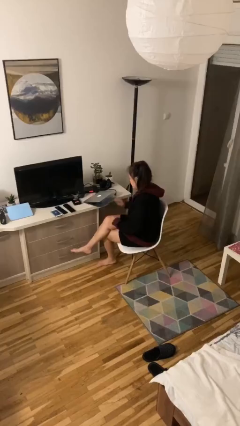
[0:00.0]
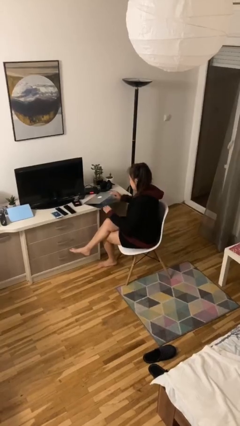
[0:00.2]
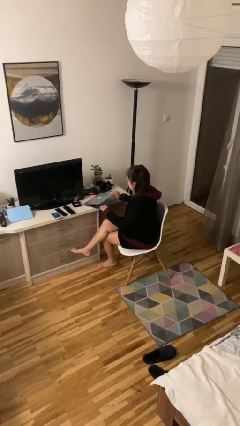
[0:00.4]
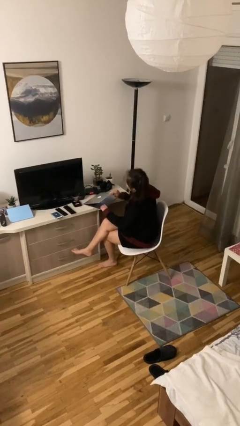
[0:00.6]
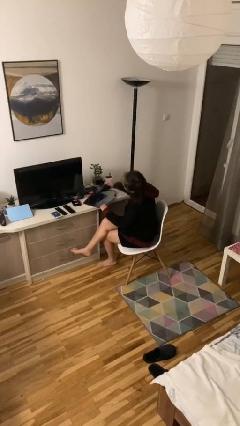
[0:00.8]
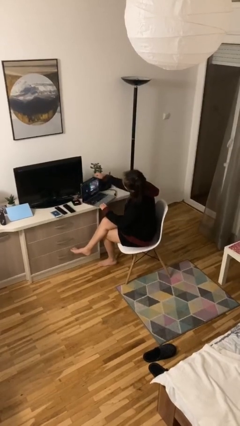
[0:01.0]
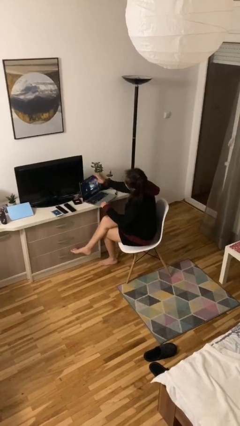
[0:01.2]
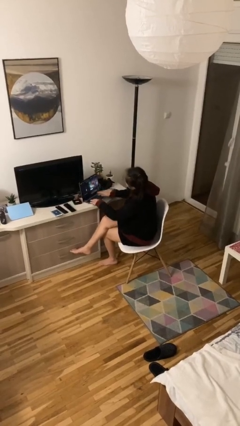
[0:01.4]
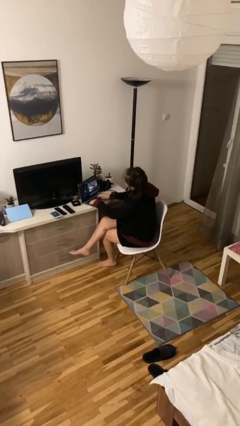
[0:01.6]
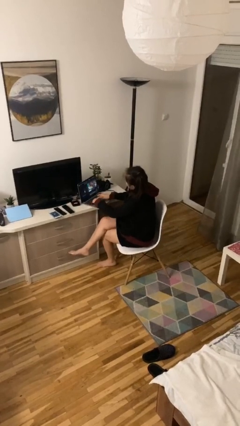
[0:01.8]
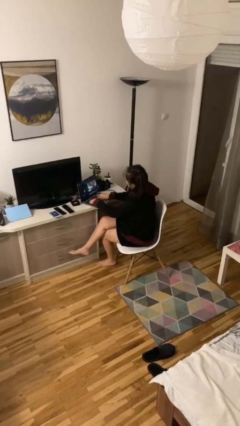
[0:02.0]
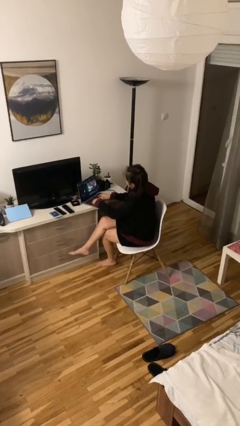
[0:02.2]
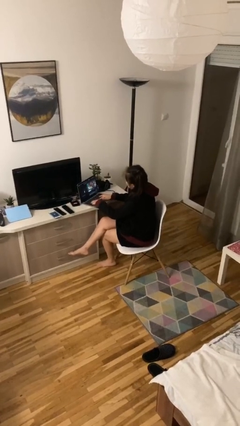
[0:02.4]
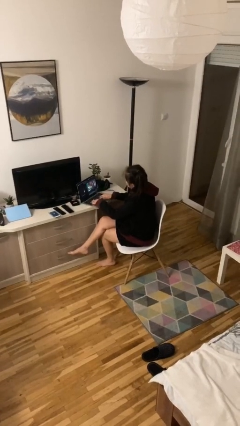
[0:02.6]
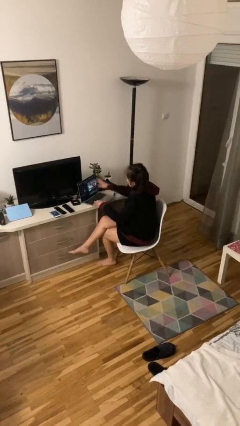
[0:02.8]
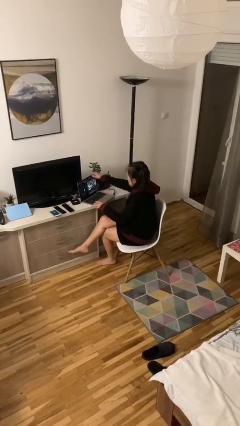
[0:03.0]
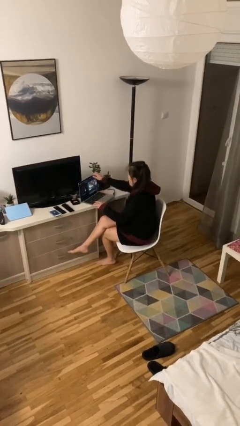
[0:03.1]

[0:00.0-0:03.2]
person interacts with laptop

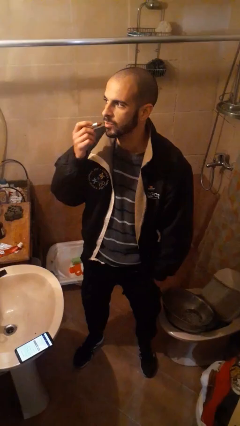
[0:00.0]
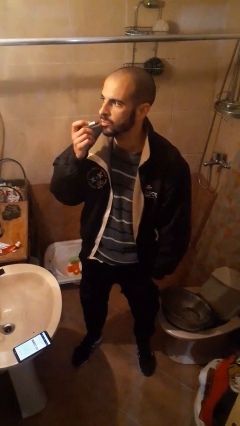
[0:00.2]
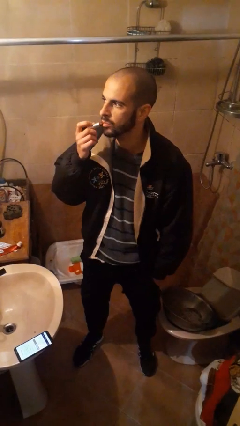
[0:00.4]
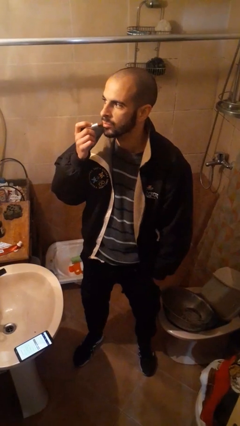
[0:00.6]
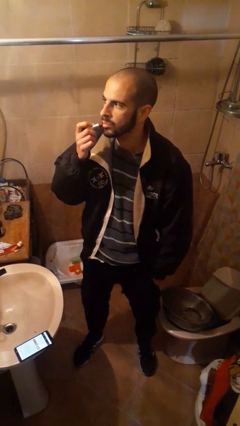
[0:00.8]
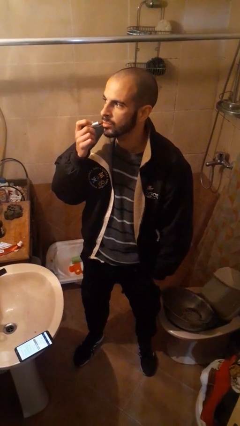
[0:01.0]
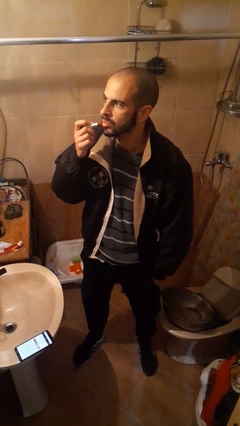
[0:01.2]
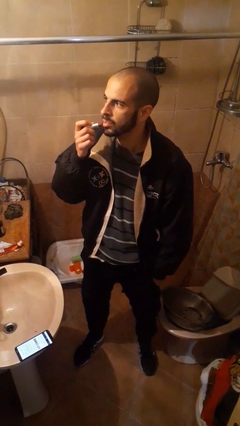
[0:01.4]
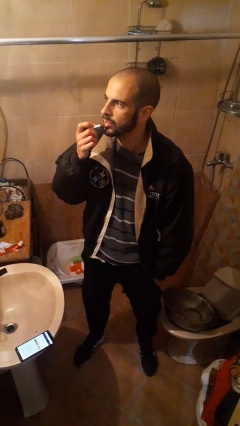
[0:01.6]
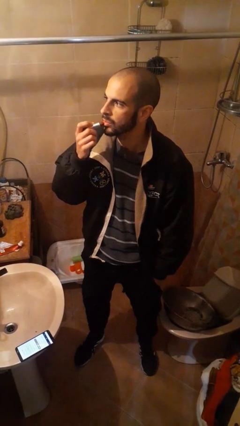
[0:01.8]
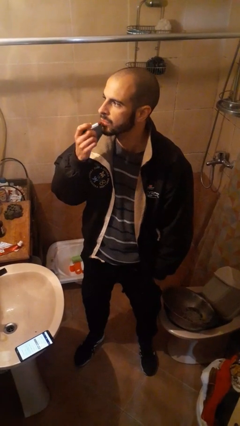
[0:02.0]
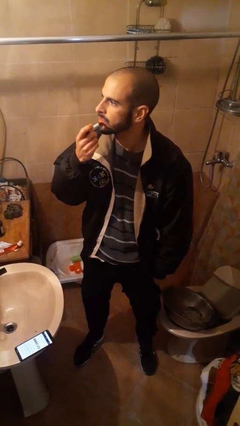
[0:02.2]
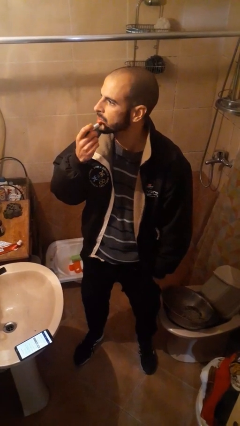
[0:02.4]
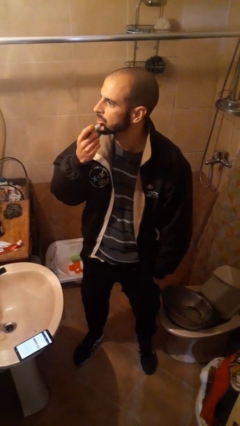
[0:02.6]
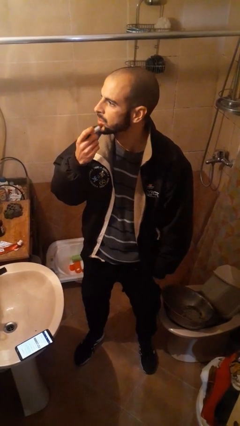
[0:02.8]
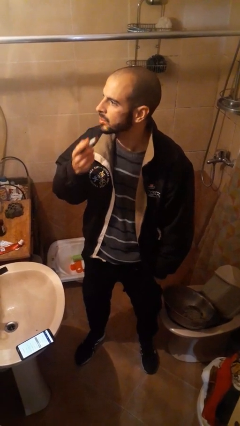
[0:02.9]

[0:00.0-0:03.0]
person applies lip makeup

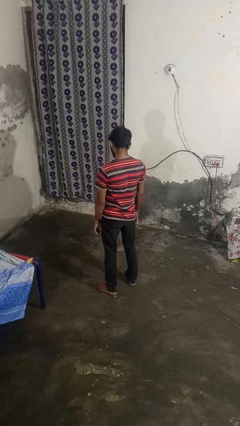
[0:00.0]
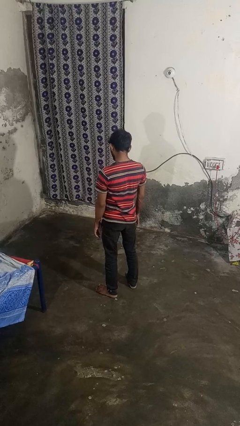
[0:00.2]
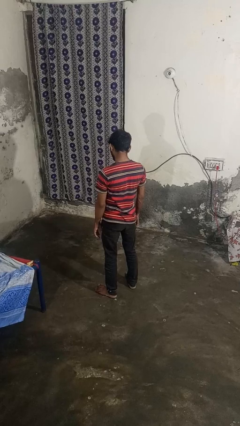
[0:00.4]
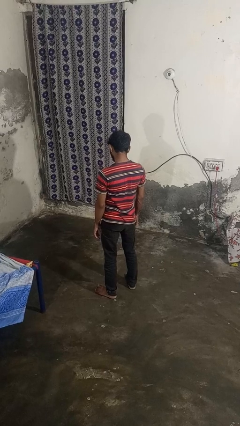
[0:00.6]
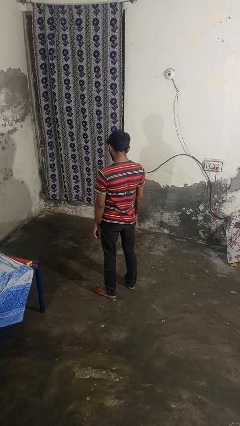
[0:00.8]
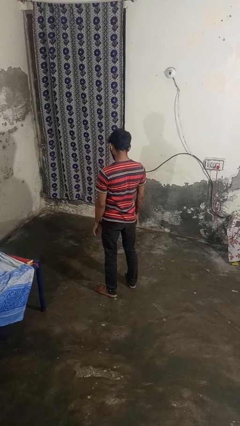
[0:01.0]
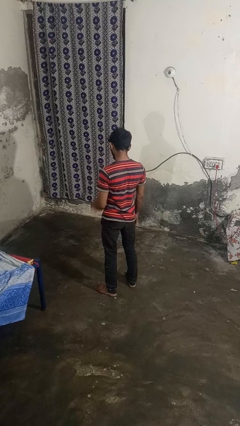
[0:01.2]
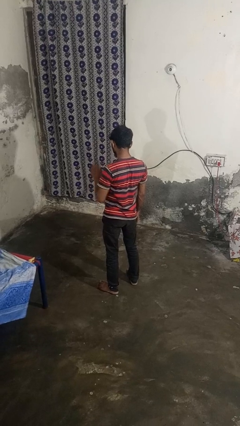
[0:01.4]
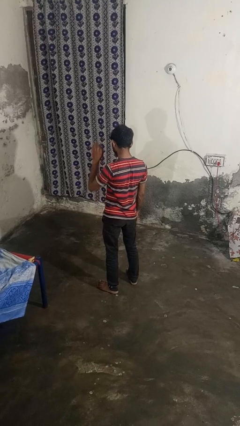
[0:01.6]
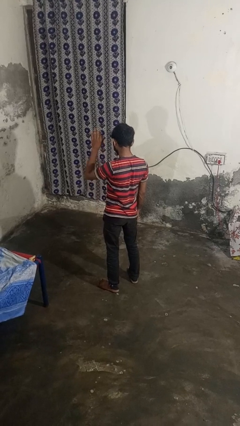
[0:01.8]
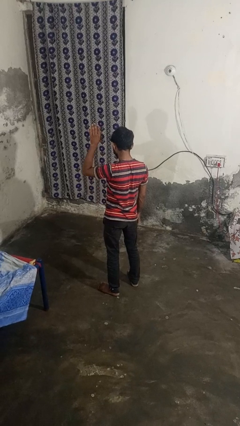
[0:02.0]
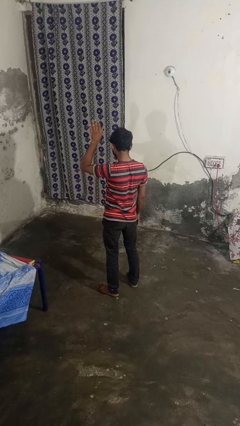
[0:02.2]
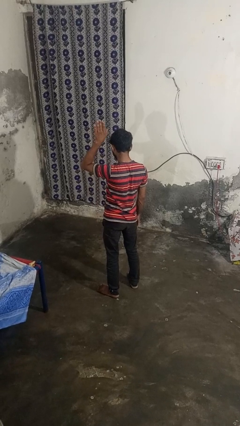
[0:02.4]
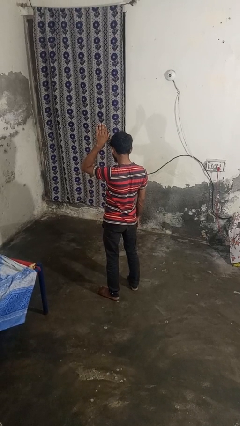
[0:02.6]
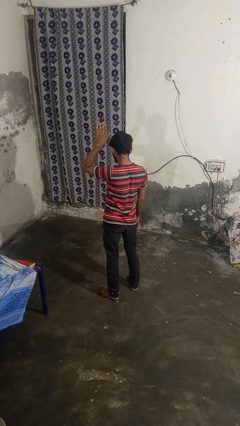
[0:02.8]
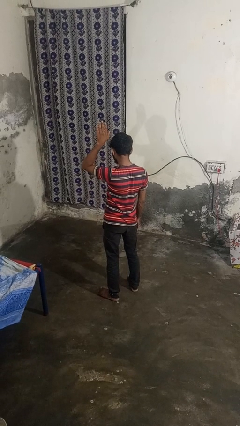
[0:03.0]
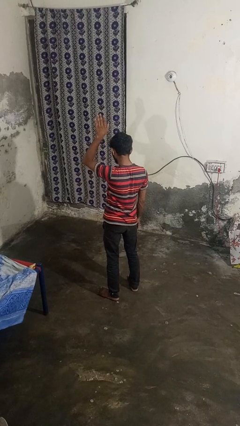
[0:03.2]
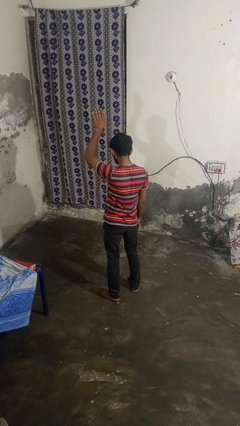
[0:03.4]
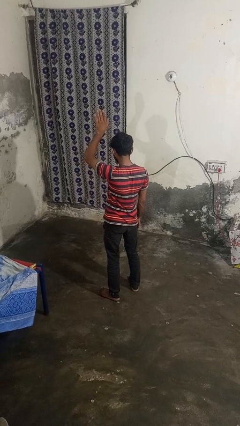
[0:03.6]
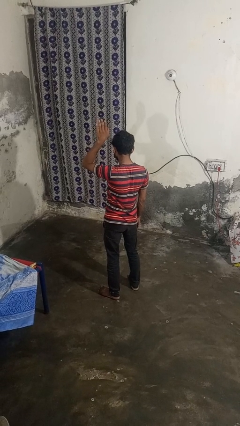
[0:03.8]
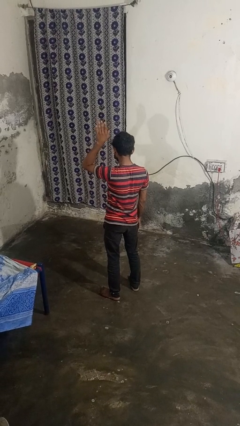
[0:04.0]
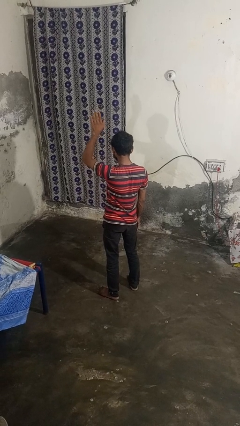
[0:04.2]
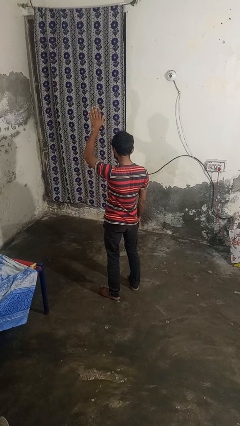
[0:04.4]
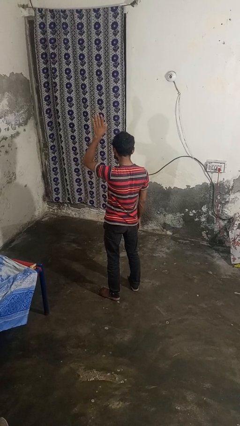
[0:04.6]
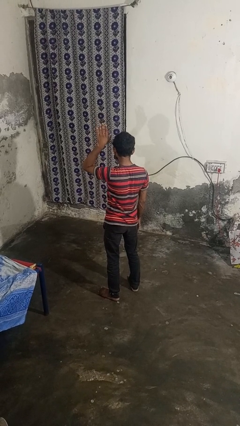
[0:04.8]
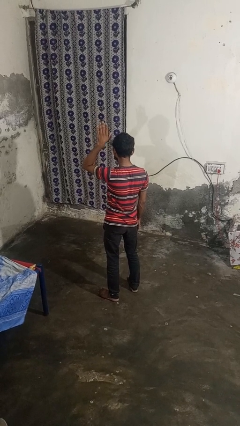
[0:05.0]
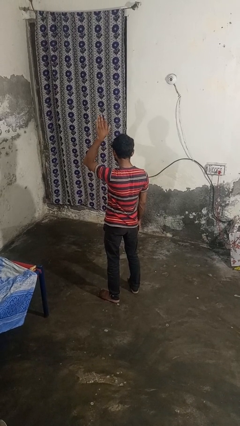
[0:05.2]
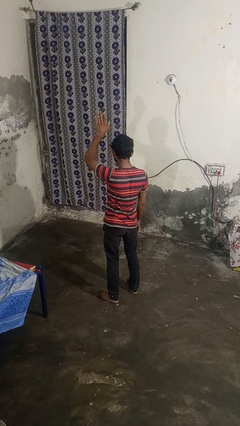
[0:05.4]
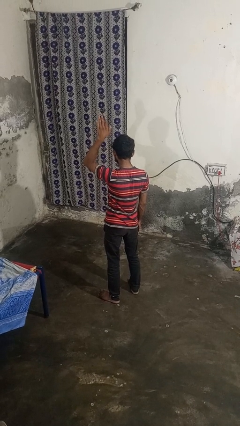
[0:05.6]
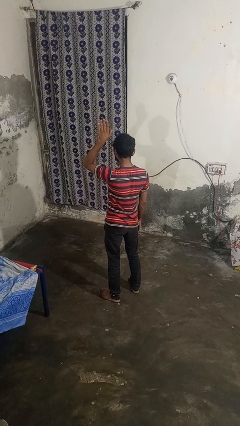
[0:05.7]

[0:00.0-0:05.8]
person gestures raise hand

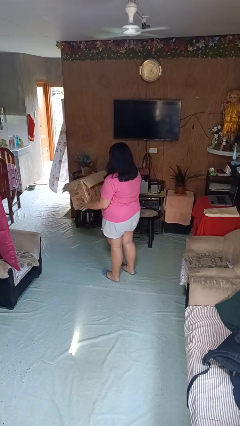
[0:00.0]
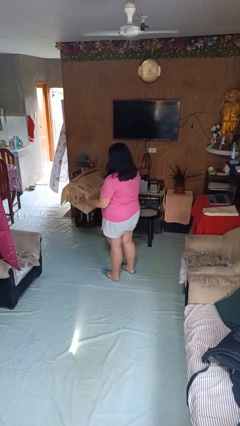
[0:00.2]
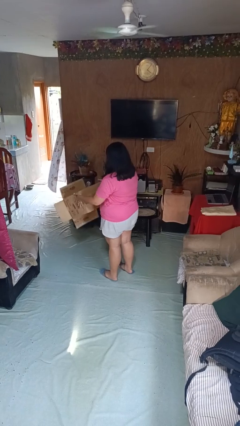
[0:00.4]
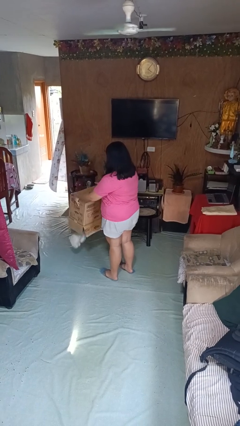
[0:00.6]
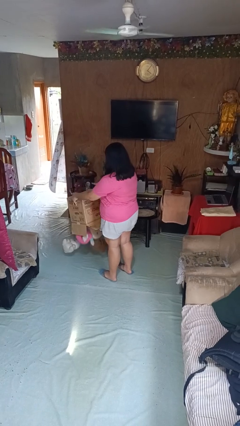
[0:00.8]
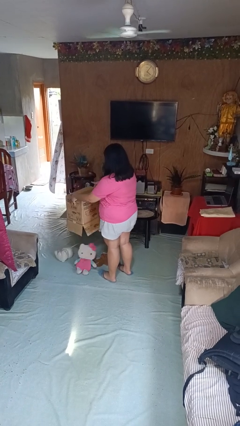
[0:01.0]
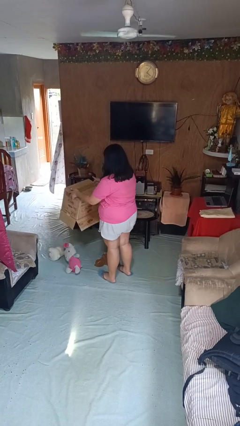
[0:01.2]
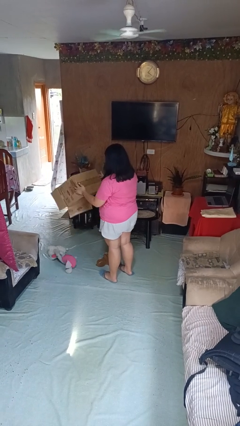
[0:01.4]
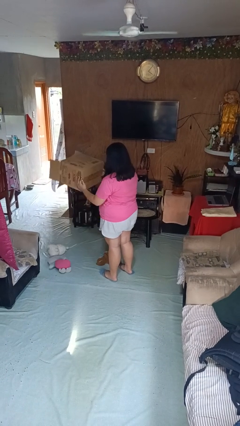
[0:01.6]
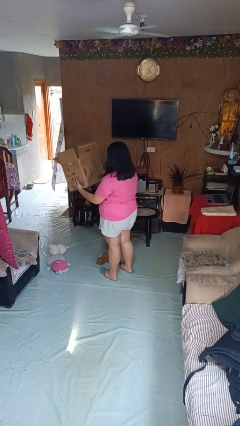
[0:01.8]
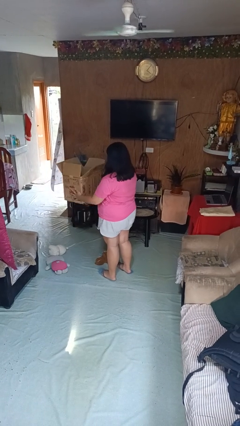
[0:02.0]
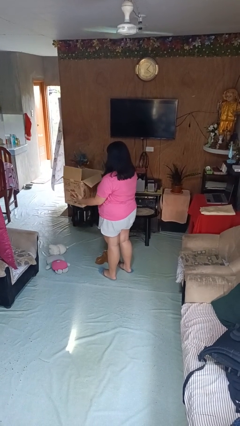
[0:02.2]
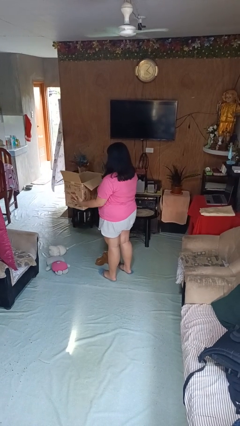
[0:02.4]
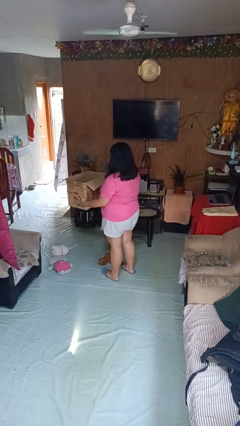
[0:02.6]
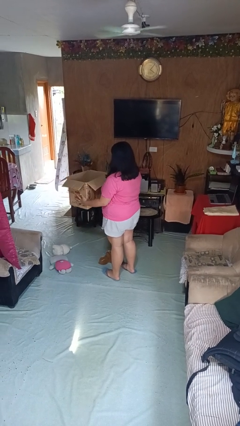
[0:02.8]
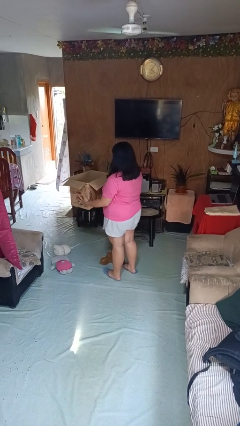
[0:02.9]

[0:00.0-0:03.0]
person unloads box onto floor

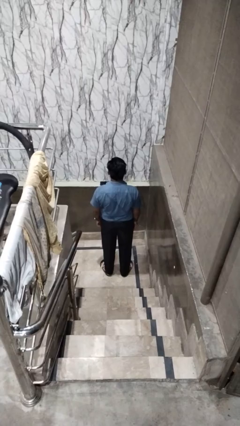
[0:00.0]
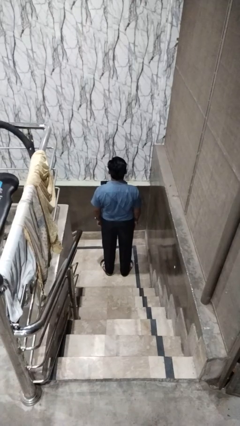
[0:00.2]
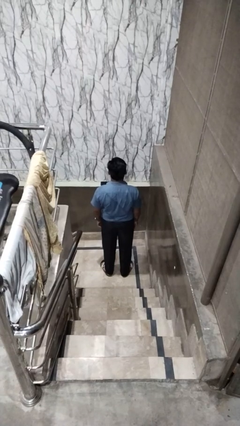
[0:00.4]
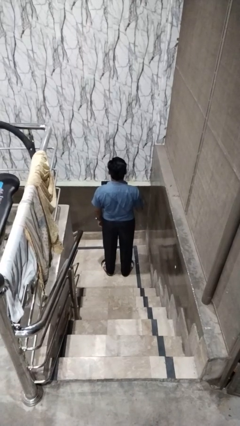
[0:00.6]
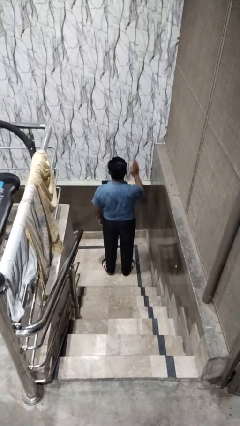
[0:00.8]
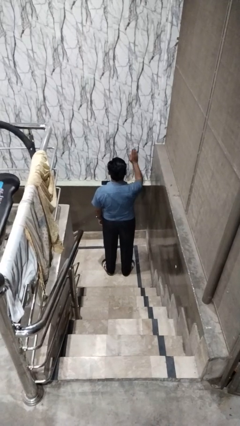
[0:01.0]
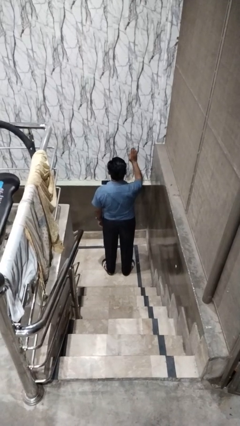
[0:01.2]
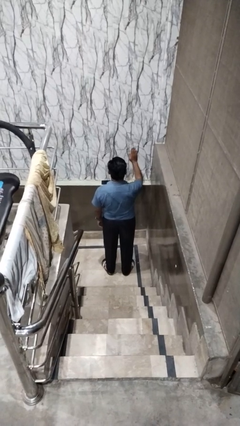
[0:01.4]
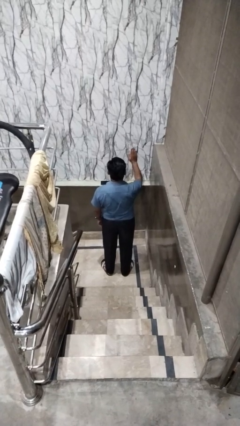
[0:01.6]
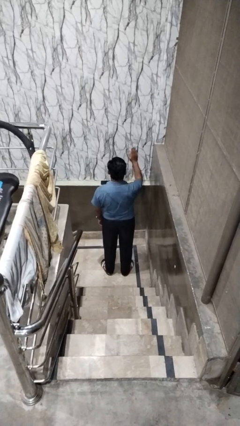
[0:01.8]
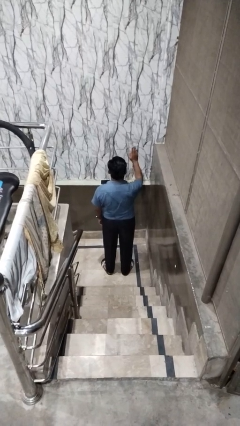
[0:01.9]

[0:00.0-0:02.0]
person gestures stop

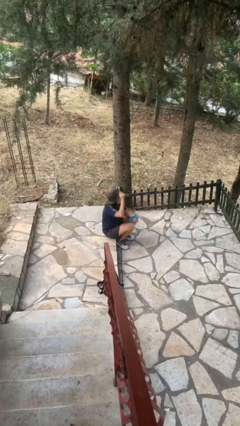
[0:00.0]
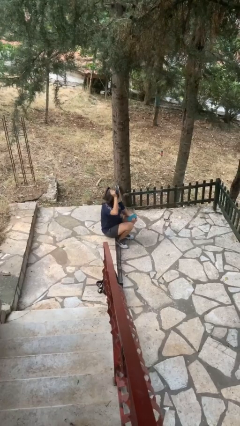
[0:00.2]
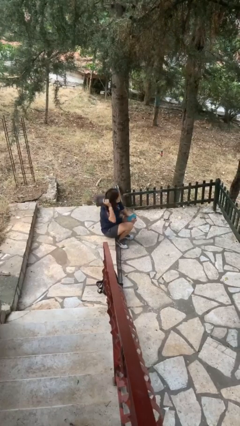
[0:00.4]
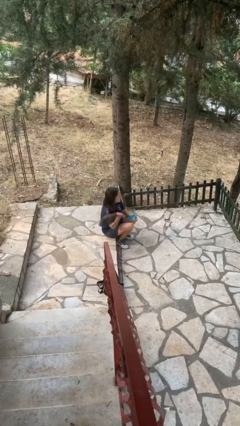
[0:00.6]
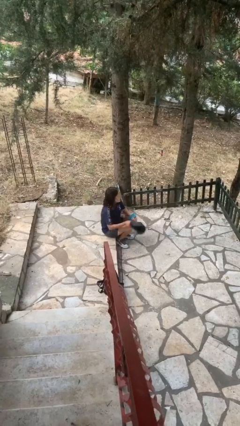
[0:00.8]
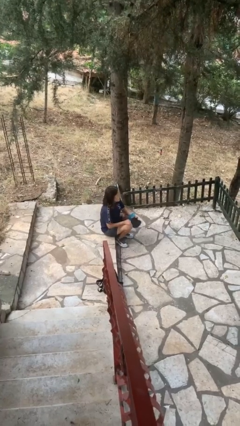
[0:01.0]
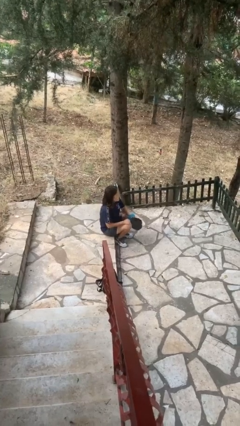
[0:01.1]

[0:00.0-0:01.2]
person takes off hat
